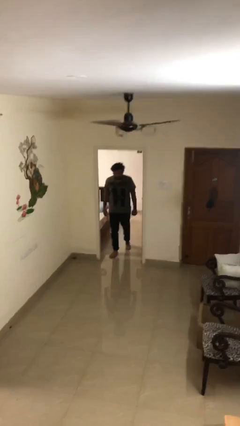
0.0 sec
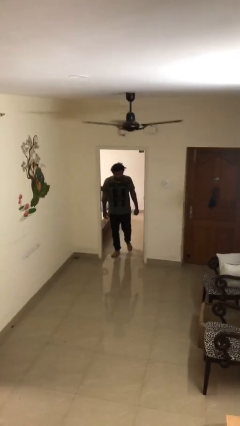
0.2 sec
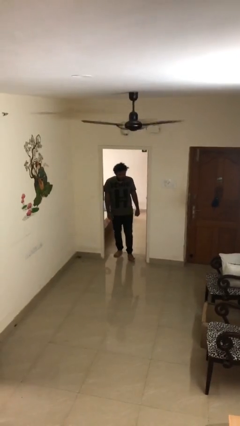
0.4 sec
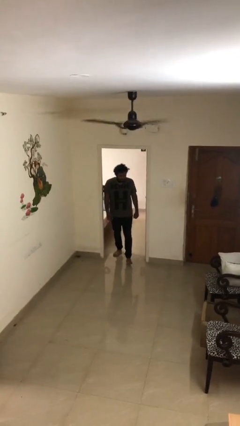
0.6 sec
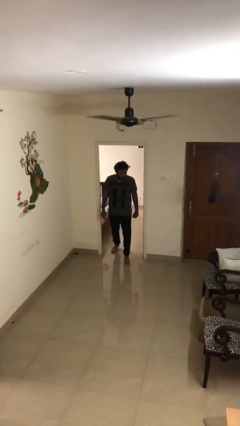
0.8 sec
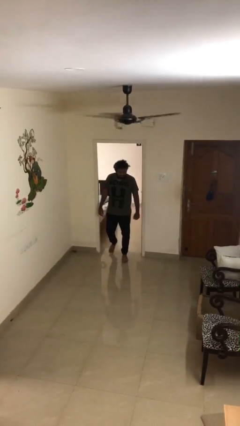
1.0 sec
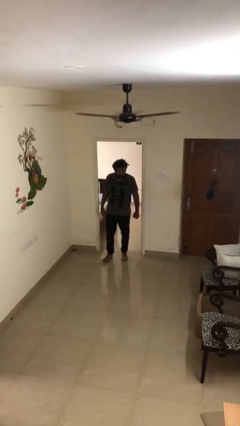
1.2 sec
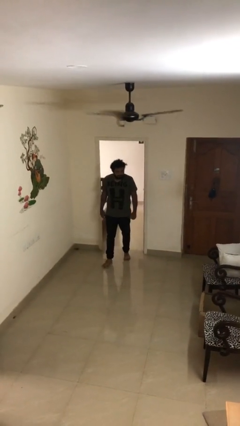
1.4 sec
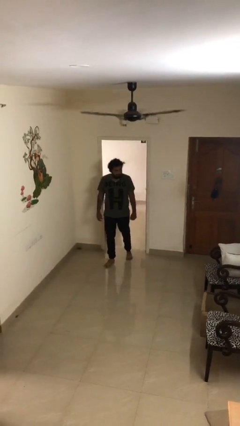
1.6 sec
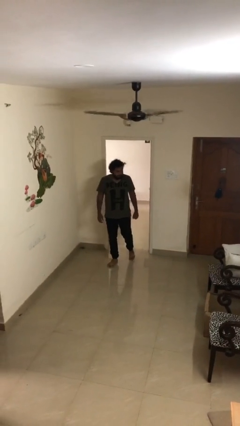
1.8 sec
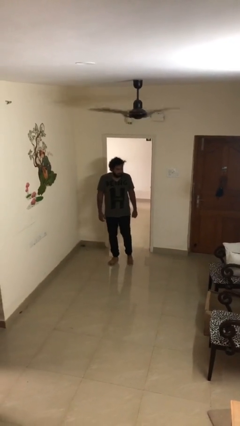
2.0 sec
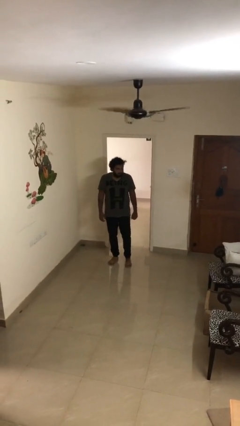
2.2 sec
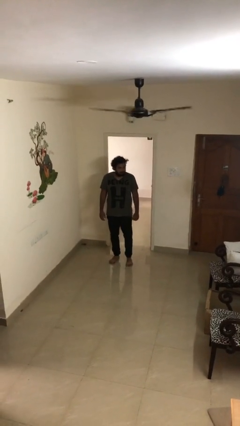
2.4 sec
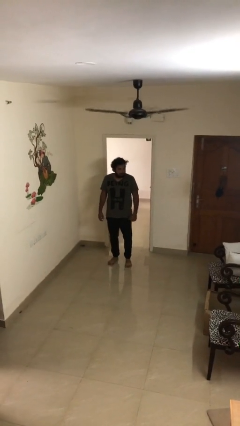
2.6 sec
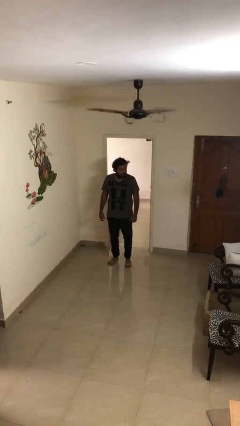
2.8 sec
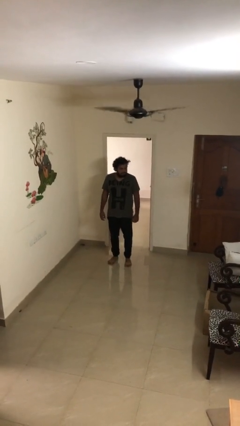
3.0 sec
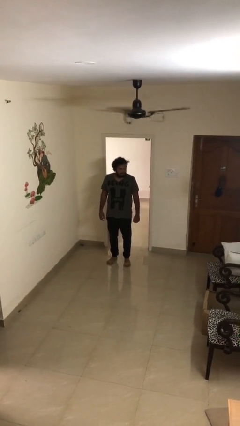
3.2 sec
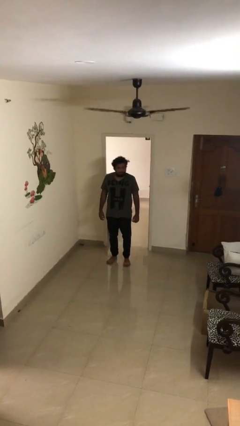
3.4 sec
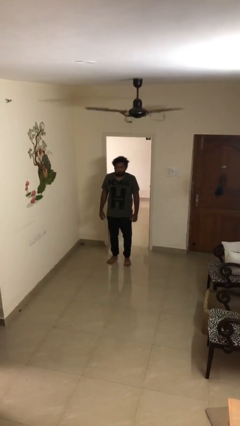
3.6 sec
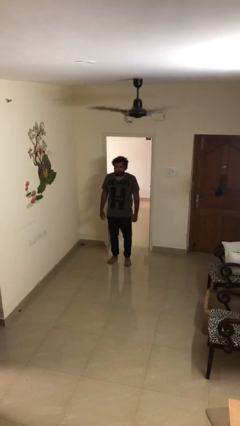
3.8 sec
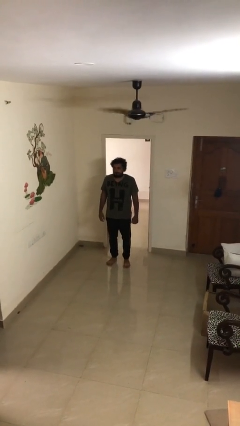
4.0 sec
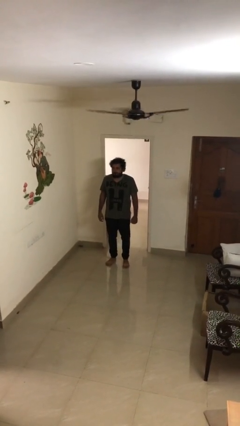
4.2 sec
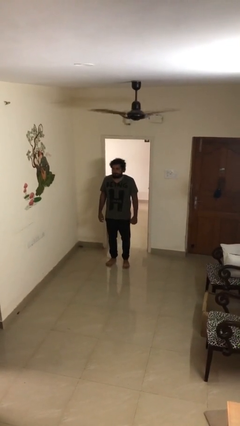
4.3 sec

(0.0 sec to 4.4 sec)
person enters scene through structure

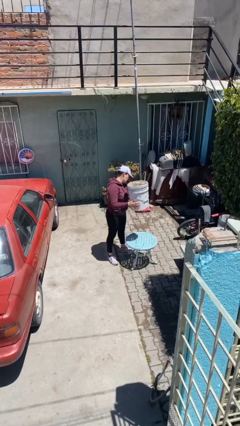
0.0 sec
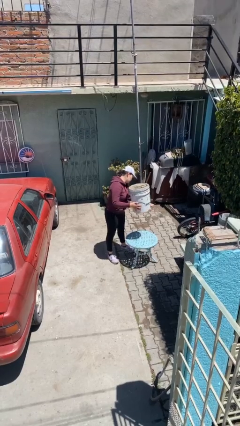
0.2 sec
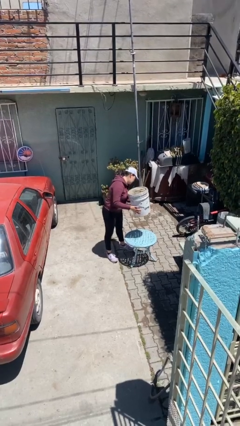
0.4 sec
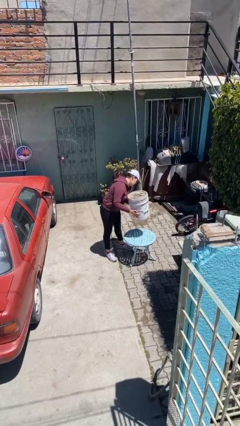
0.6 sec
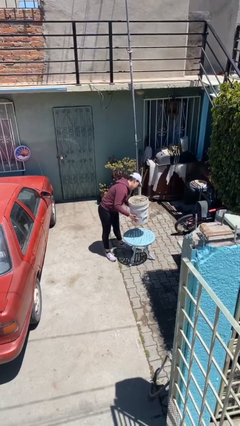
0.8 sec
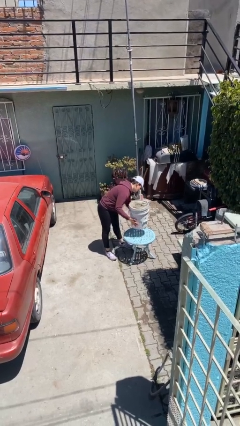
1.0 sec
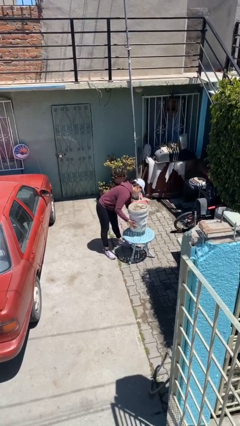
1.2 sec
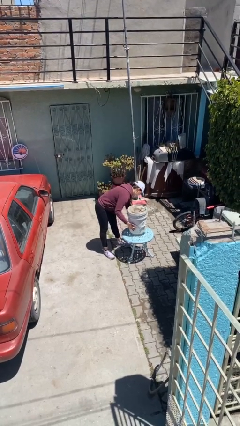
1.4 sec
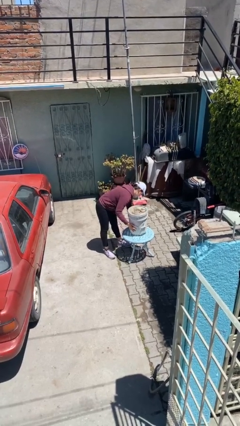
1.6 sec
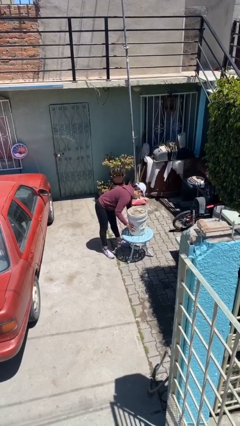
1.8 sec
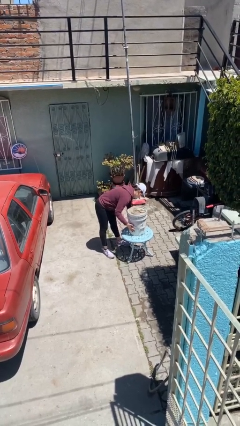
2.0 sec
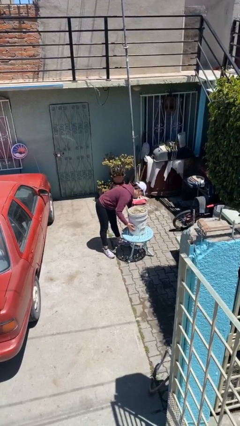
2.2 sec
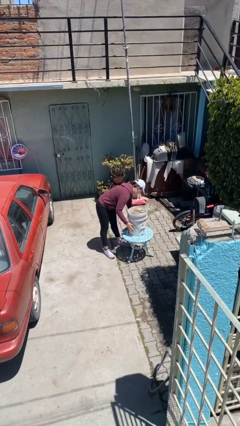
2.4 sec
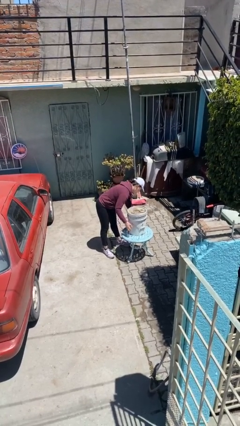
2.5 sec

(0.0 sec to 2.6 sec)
person puts down object on table

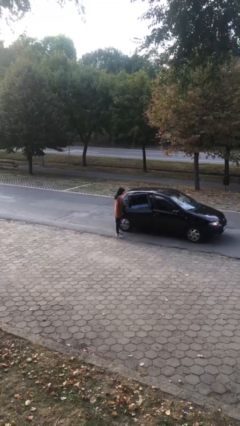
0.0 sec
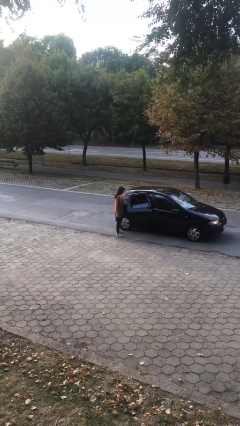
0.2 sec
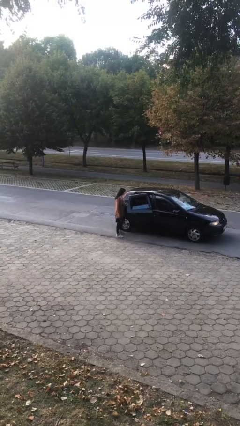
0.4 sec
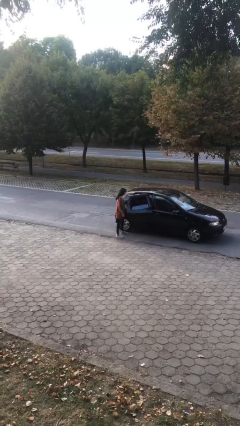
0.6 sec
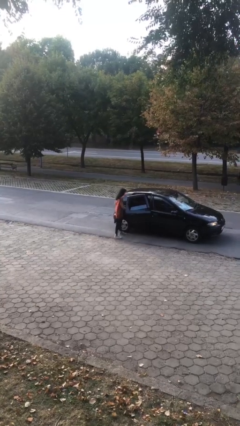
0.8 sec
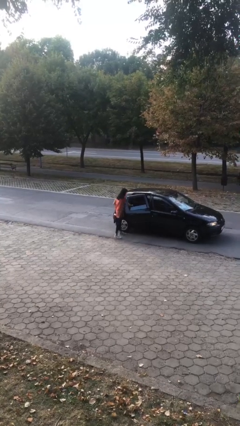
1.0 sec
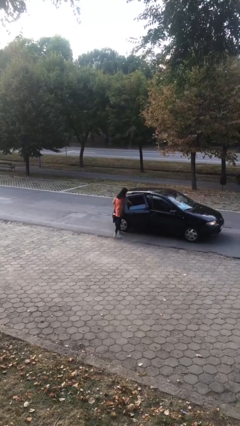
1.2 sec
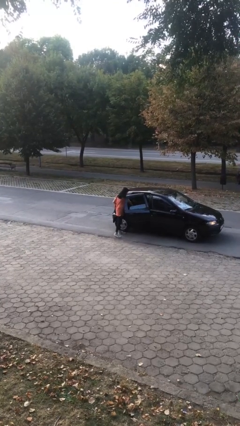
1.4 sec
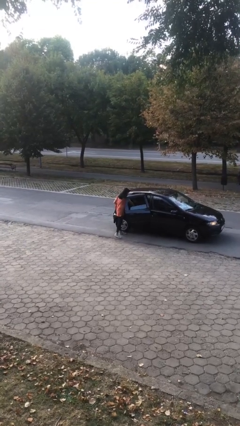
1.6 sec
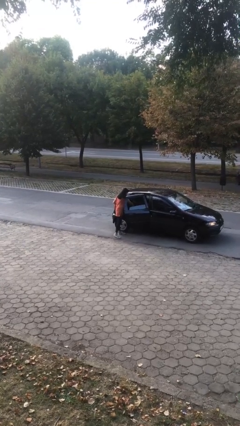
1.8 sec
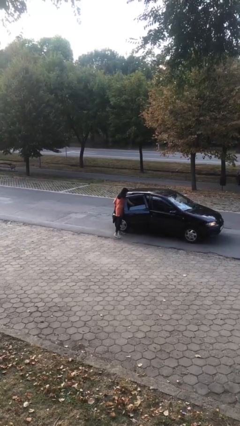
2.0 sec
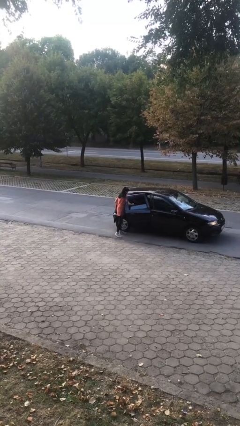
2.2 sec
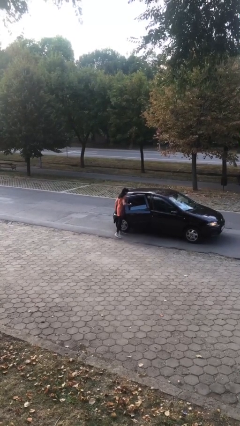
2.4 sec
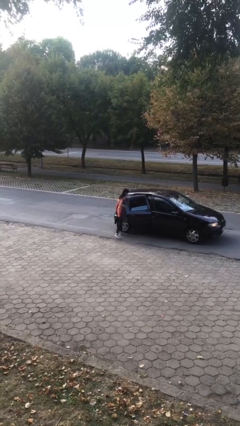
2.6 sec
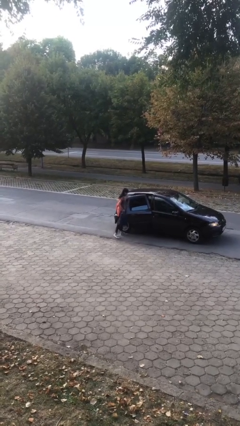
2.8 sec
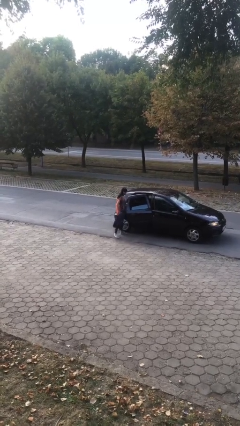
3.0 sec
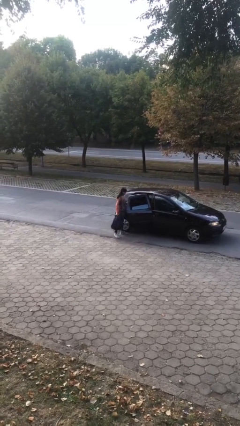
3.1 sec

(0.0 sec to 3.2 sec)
person unloads car

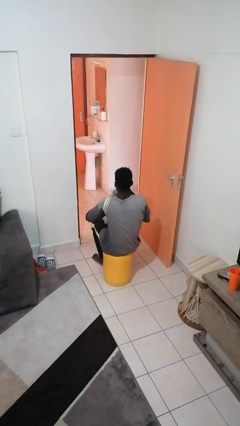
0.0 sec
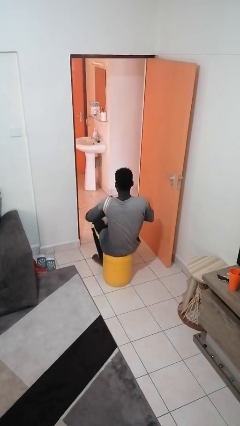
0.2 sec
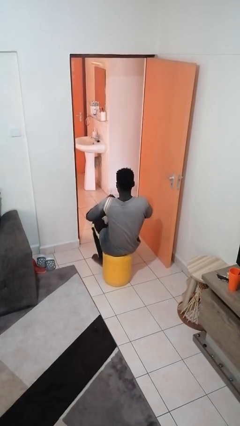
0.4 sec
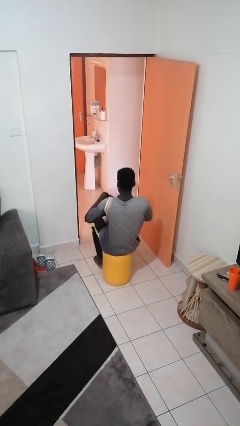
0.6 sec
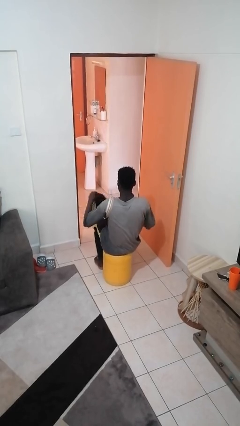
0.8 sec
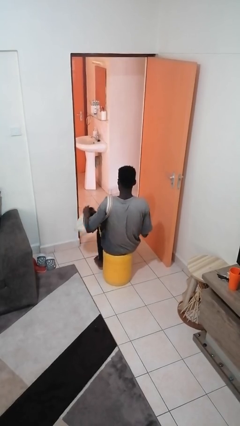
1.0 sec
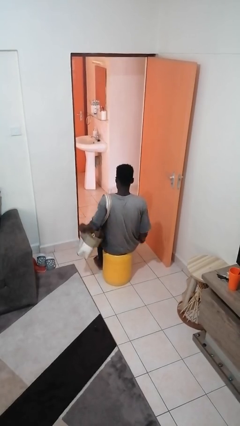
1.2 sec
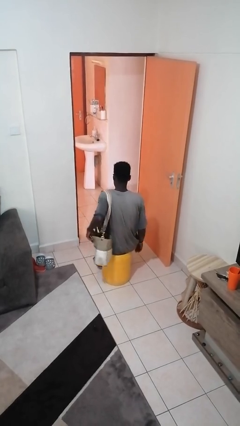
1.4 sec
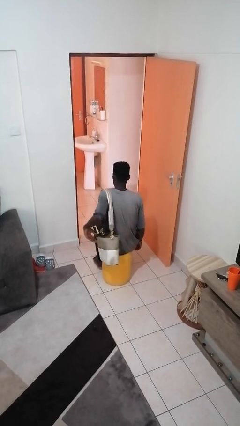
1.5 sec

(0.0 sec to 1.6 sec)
person puts object into purse

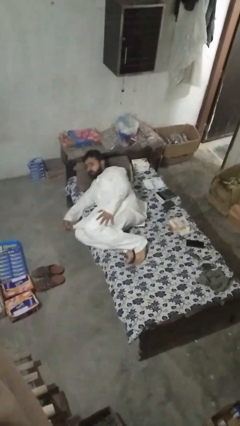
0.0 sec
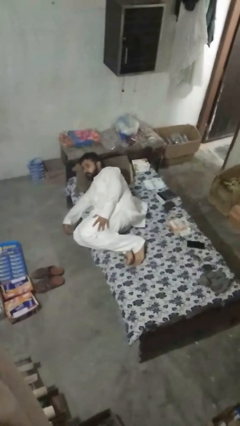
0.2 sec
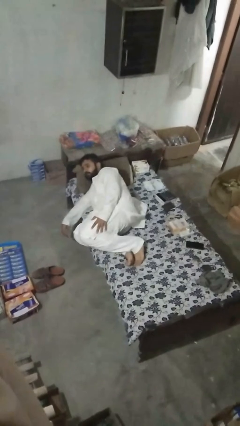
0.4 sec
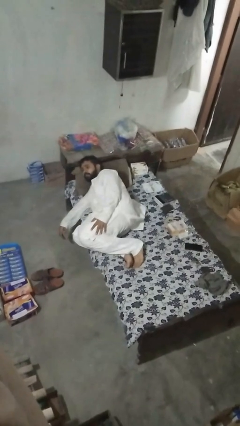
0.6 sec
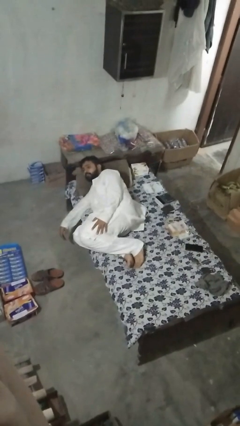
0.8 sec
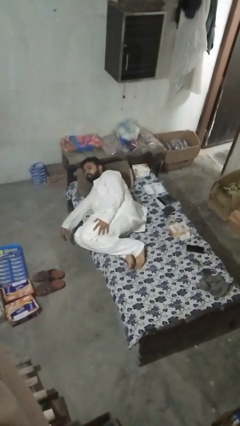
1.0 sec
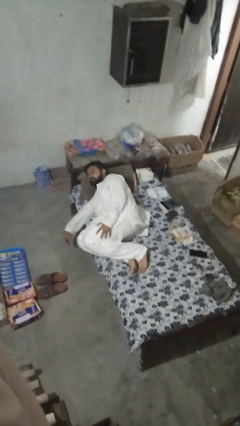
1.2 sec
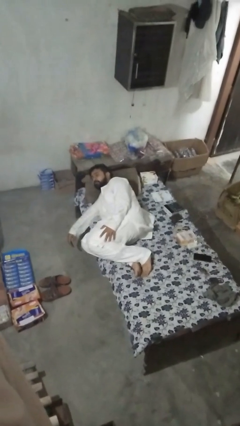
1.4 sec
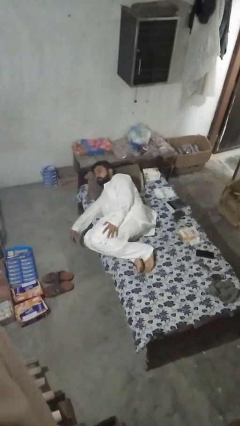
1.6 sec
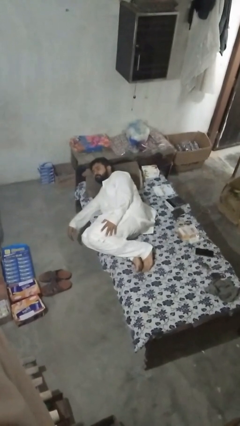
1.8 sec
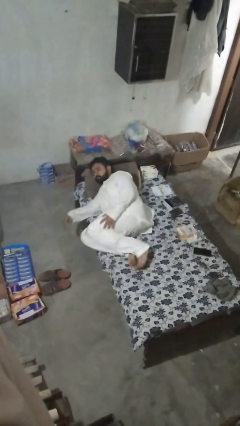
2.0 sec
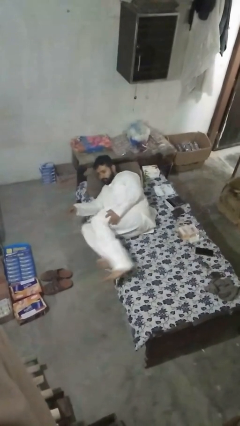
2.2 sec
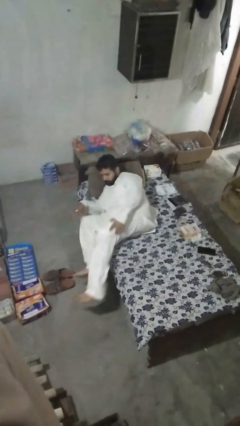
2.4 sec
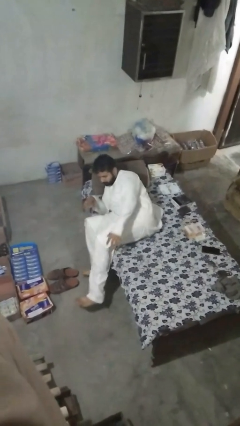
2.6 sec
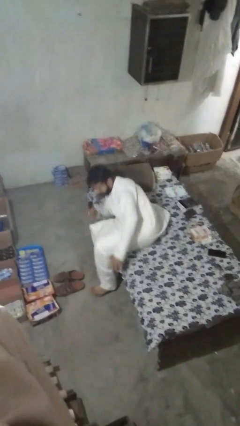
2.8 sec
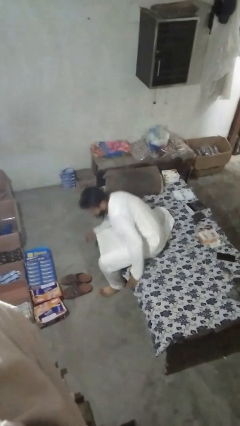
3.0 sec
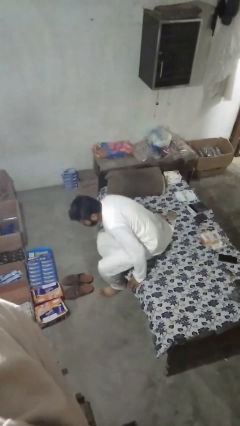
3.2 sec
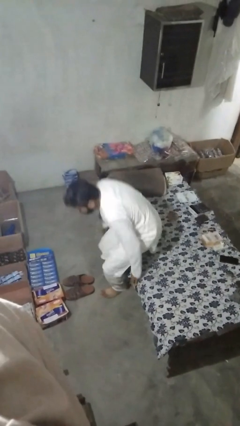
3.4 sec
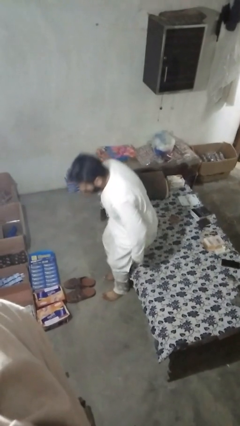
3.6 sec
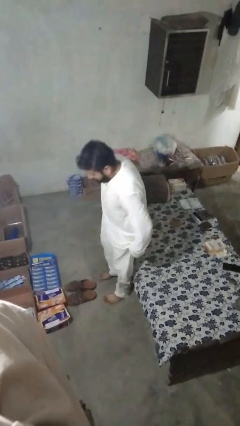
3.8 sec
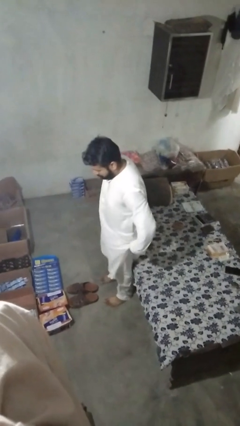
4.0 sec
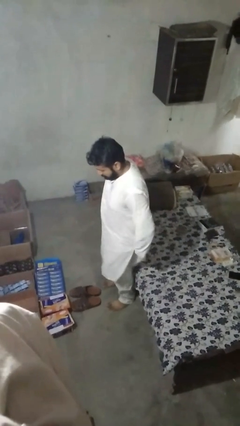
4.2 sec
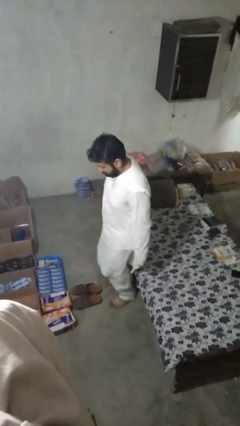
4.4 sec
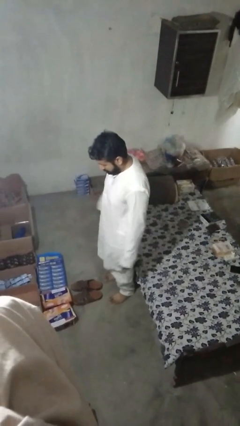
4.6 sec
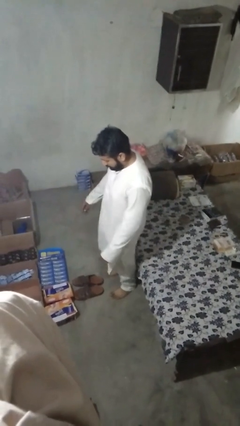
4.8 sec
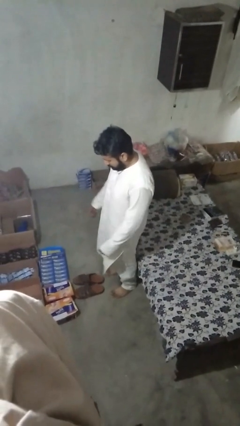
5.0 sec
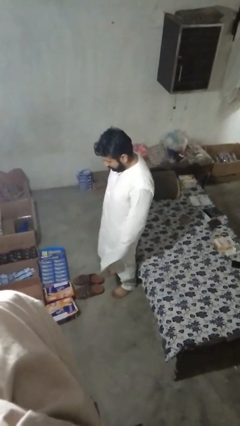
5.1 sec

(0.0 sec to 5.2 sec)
person stands up

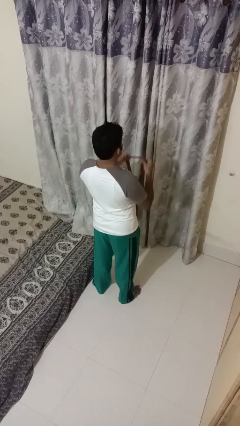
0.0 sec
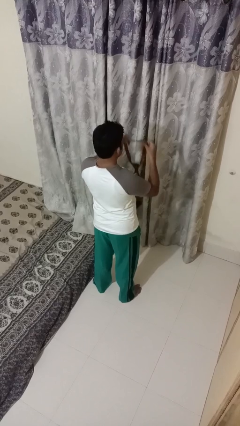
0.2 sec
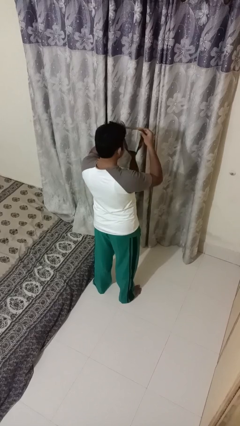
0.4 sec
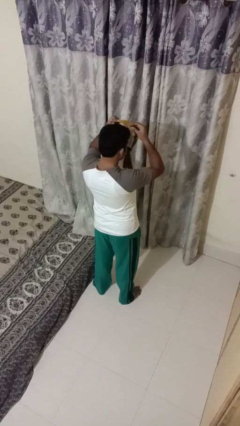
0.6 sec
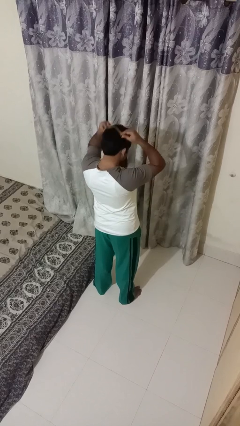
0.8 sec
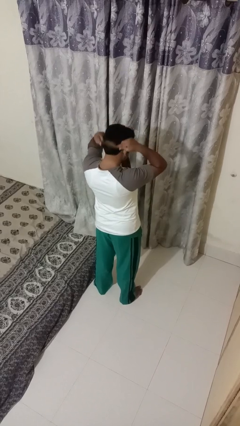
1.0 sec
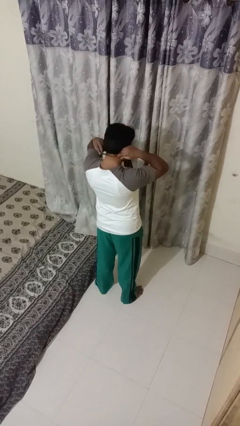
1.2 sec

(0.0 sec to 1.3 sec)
person puts on necktie
